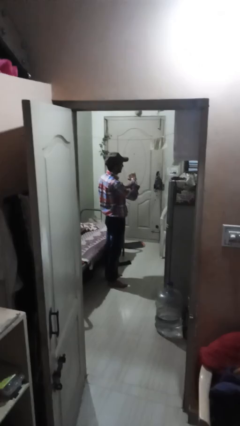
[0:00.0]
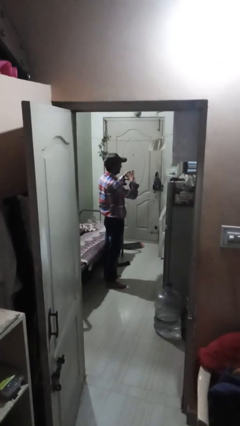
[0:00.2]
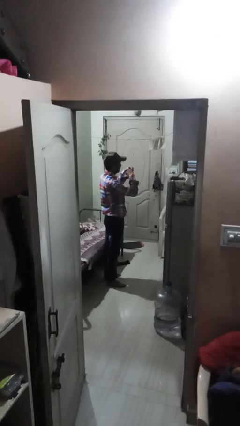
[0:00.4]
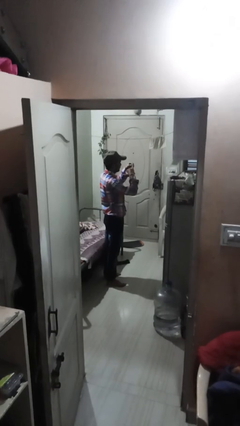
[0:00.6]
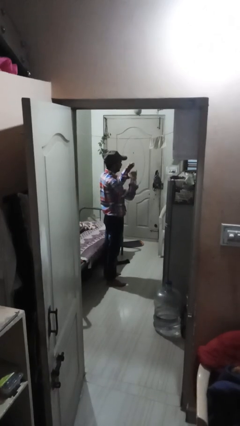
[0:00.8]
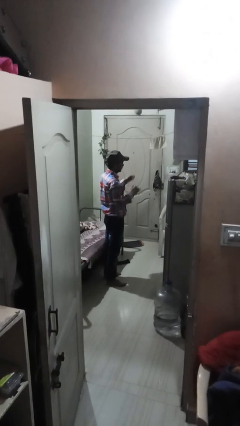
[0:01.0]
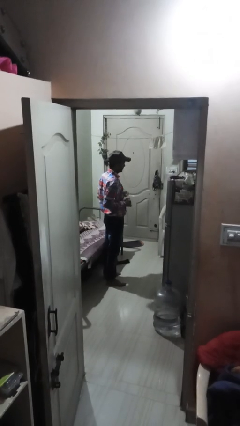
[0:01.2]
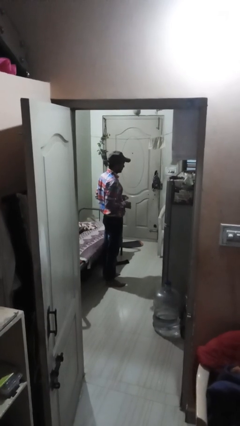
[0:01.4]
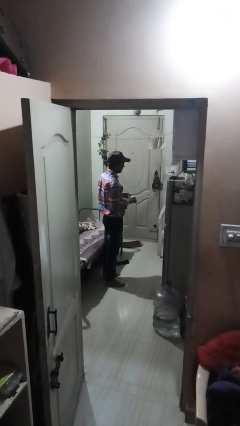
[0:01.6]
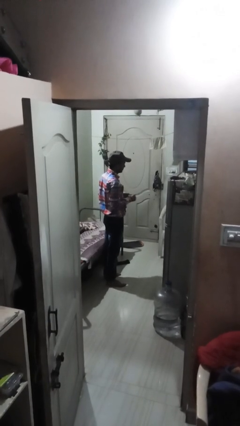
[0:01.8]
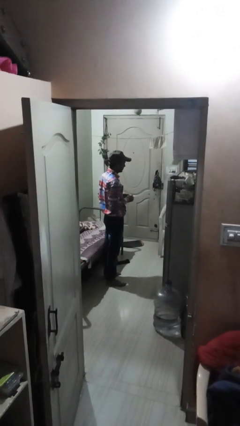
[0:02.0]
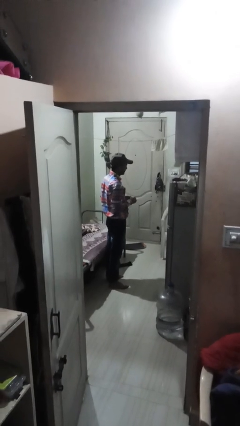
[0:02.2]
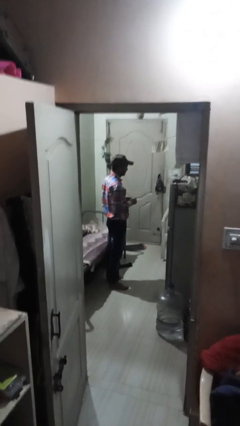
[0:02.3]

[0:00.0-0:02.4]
person takes off ring

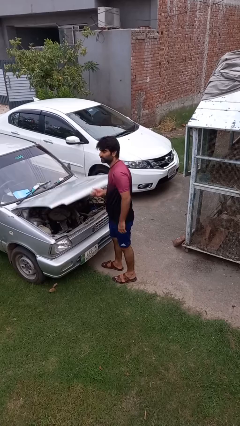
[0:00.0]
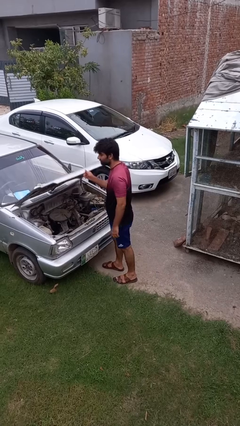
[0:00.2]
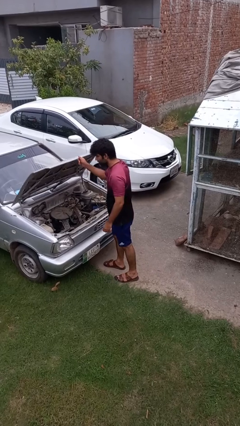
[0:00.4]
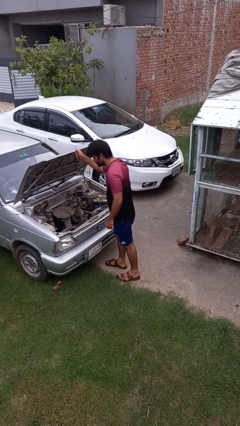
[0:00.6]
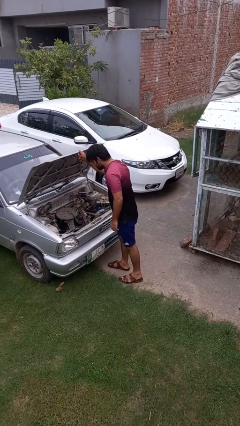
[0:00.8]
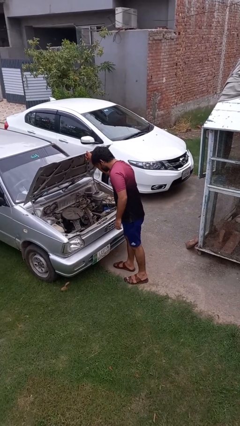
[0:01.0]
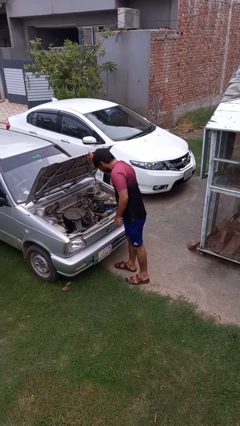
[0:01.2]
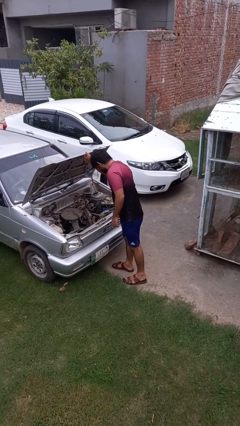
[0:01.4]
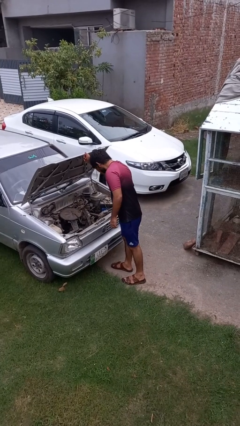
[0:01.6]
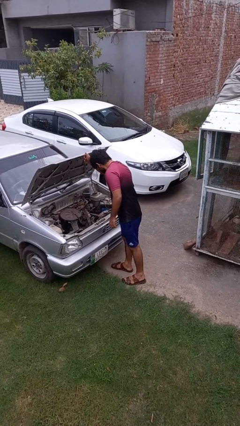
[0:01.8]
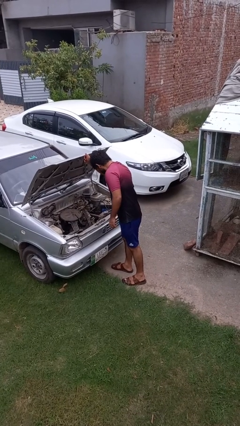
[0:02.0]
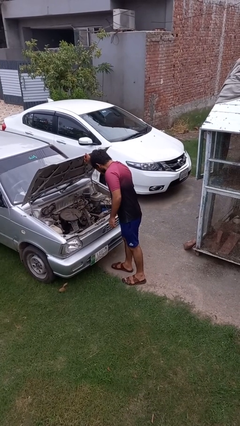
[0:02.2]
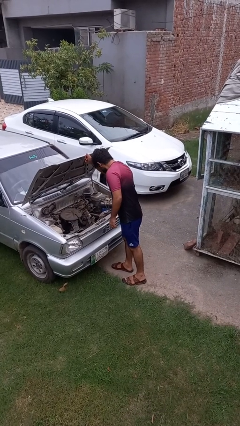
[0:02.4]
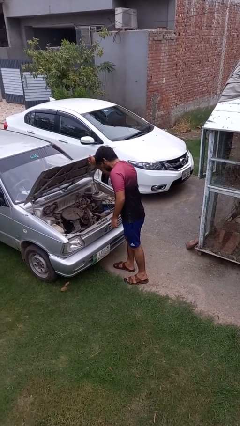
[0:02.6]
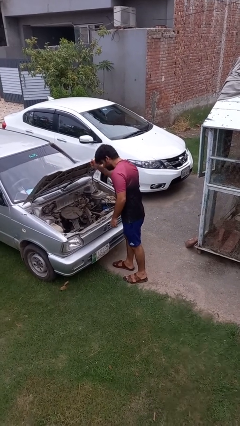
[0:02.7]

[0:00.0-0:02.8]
person opens car hood

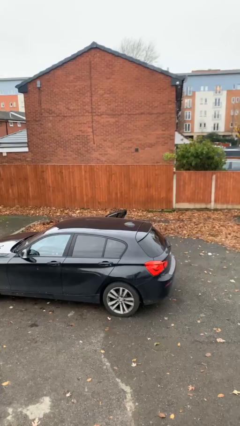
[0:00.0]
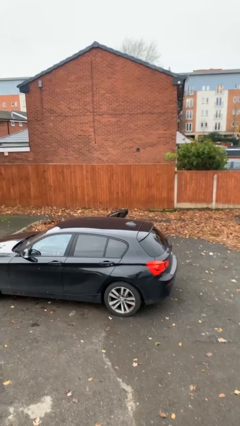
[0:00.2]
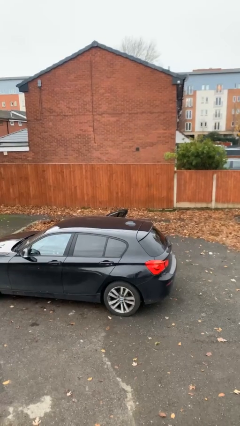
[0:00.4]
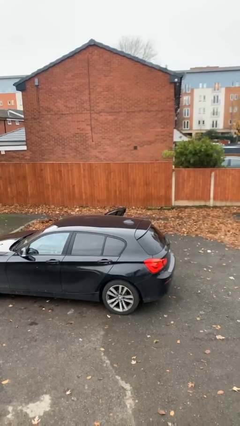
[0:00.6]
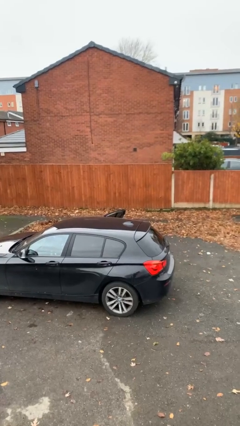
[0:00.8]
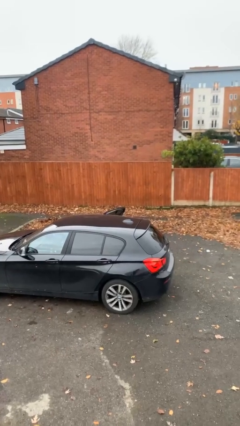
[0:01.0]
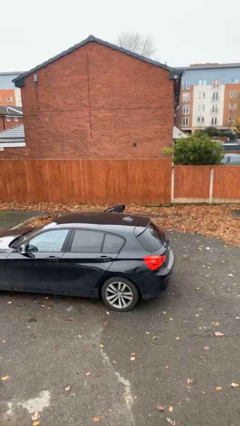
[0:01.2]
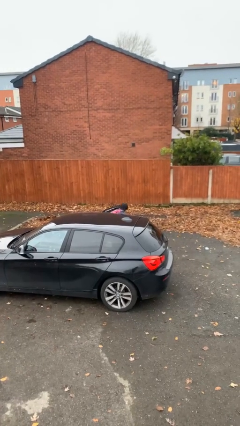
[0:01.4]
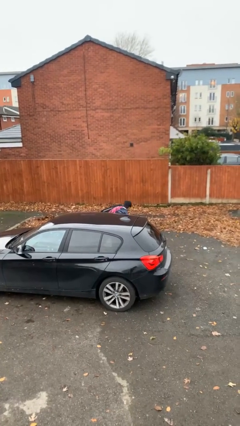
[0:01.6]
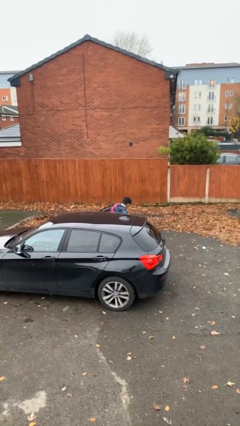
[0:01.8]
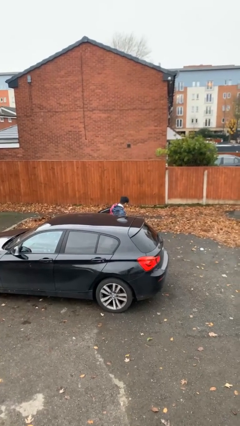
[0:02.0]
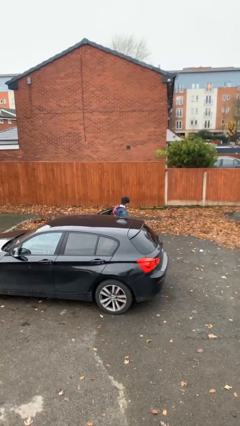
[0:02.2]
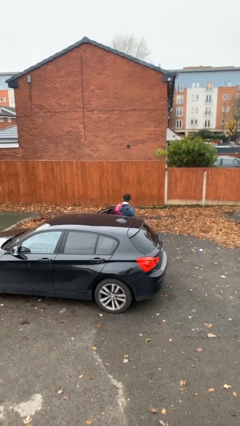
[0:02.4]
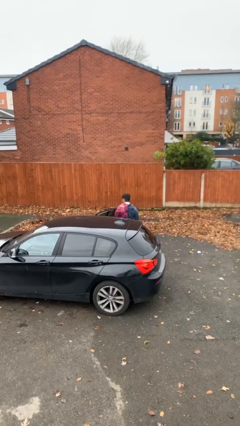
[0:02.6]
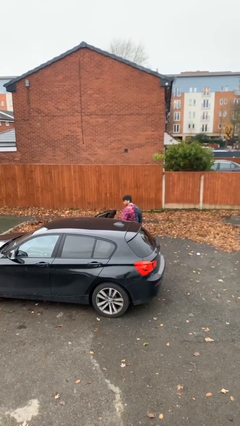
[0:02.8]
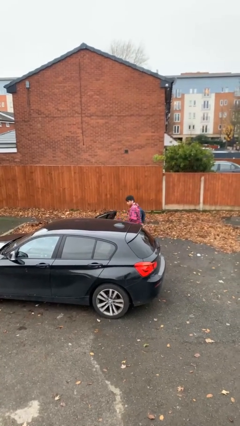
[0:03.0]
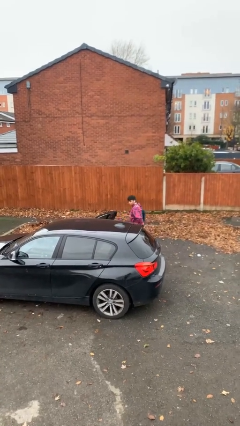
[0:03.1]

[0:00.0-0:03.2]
person exits car

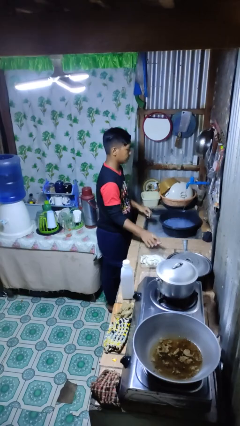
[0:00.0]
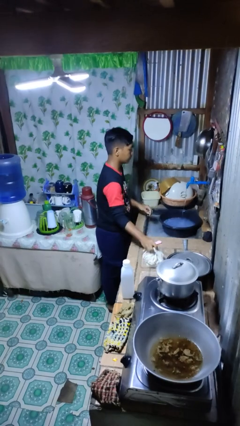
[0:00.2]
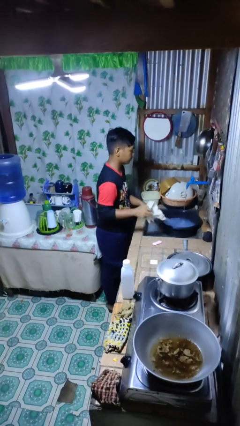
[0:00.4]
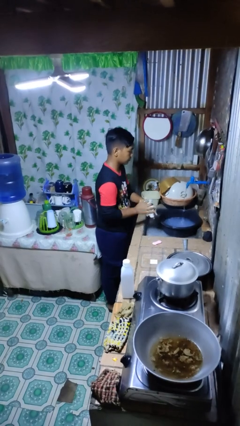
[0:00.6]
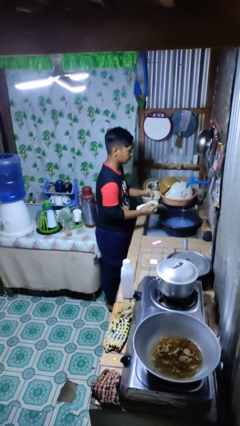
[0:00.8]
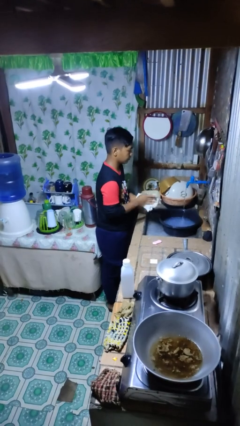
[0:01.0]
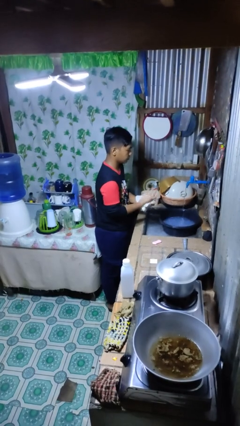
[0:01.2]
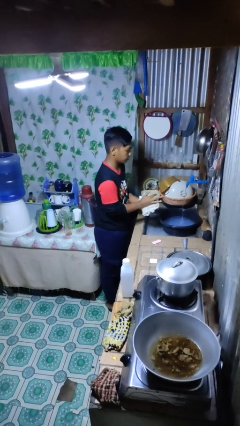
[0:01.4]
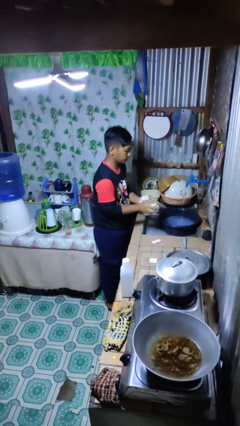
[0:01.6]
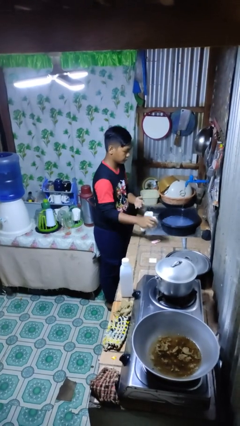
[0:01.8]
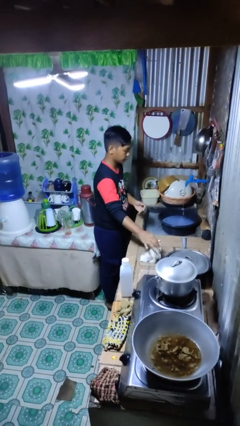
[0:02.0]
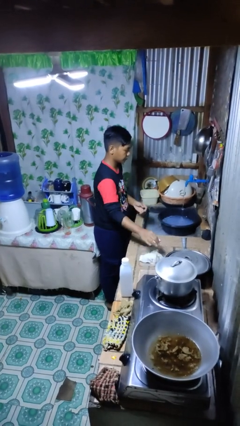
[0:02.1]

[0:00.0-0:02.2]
person dries hands with towel

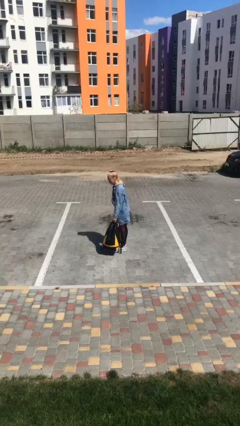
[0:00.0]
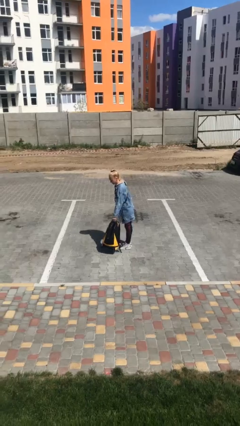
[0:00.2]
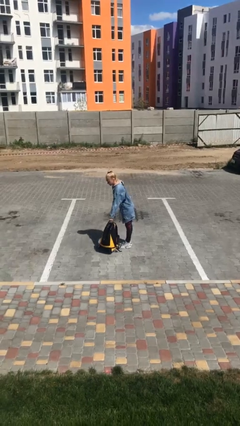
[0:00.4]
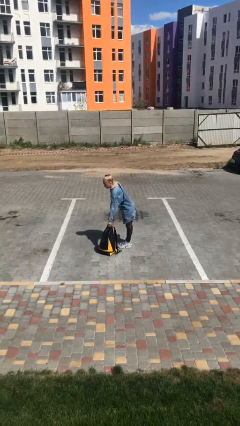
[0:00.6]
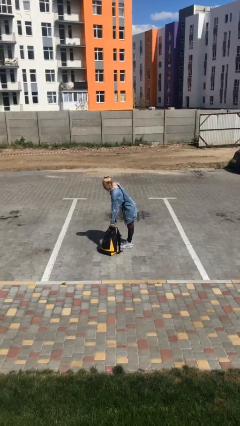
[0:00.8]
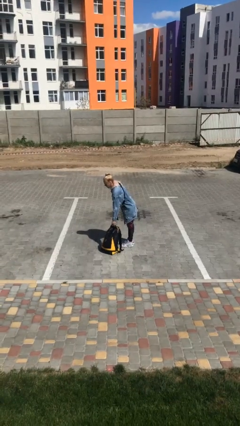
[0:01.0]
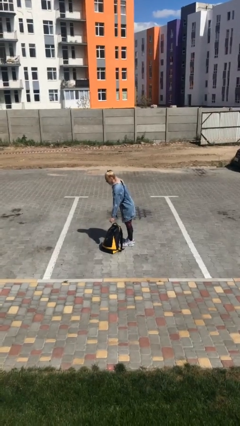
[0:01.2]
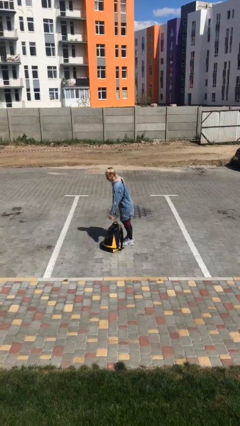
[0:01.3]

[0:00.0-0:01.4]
person puts down object on floor

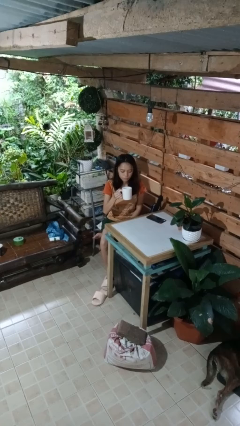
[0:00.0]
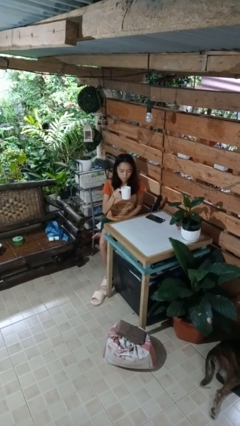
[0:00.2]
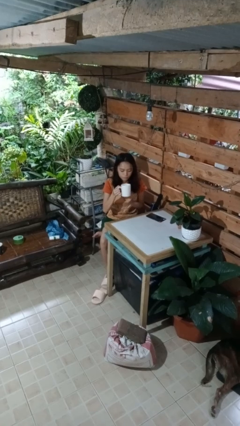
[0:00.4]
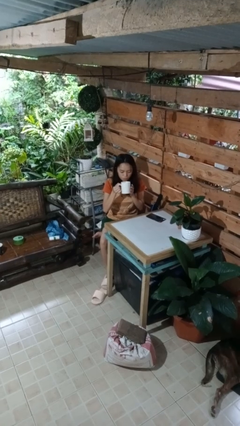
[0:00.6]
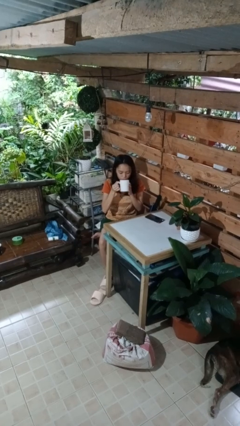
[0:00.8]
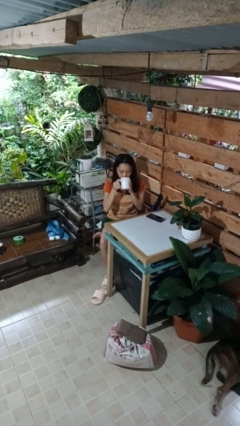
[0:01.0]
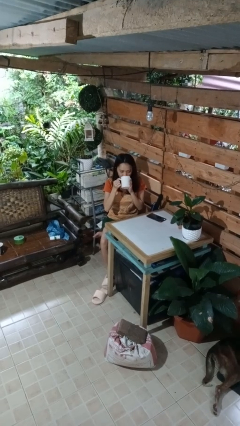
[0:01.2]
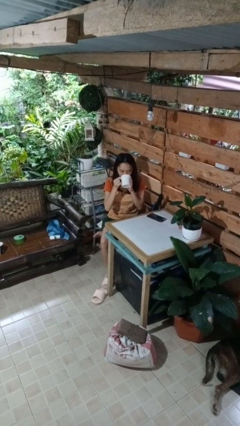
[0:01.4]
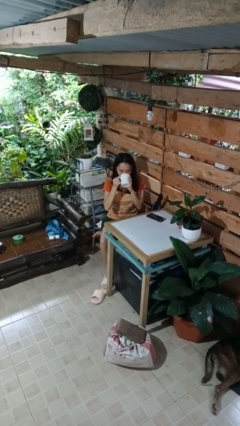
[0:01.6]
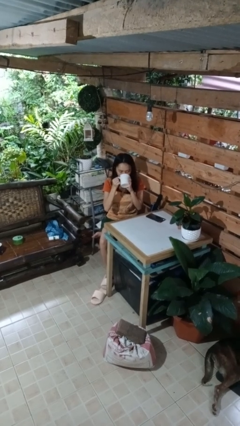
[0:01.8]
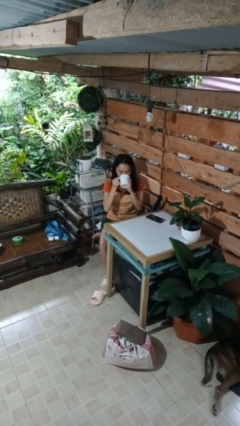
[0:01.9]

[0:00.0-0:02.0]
person drinks from mug

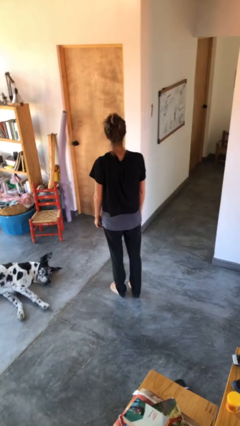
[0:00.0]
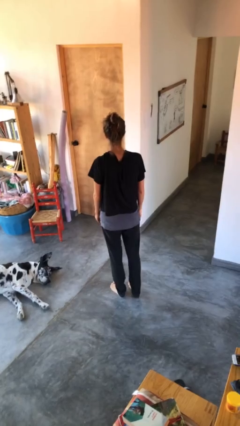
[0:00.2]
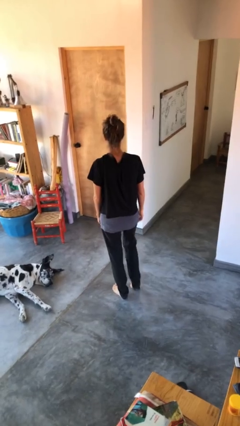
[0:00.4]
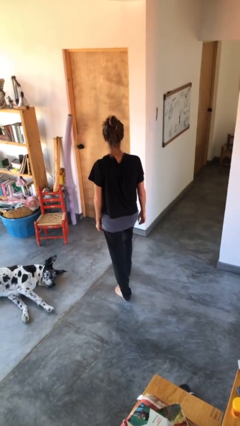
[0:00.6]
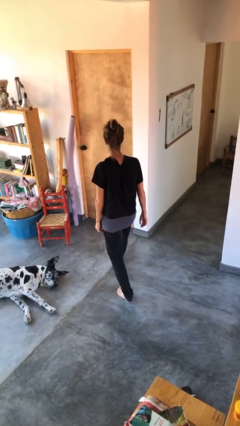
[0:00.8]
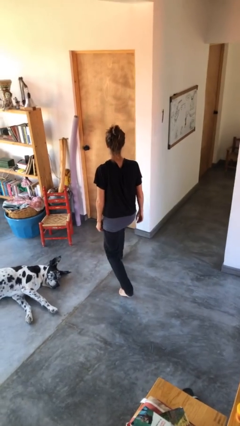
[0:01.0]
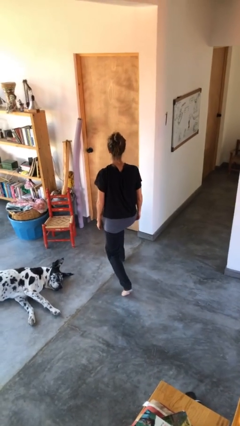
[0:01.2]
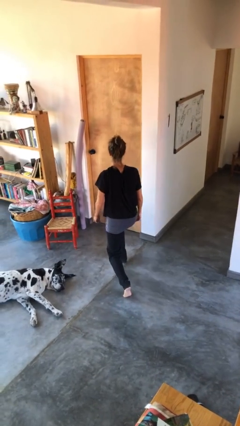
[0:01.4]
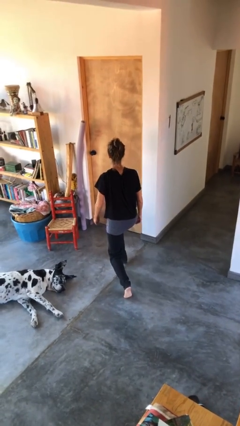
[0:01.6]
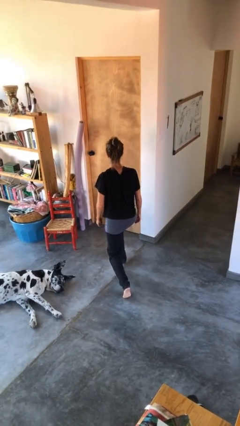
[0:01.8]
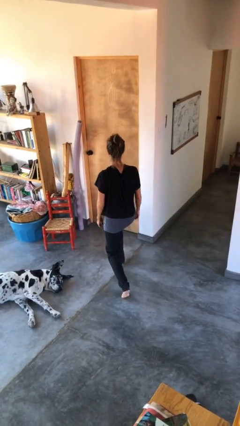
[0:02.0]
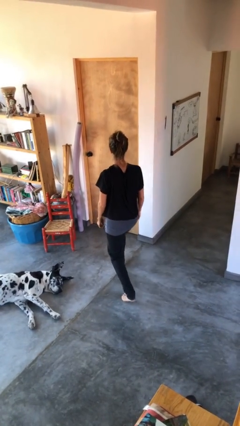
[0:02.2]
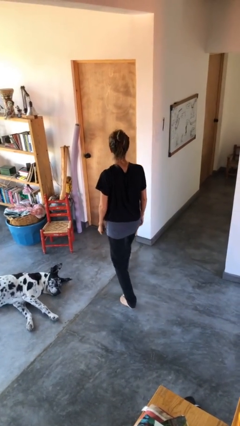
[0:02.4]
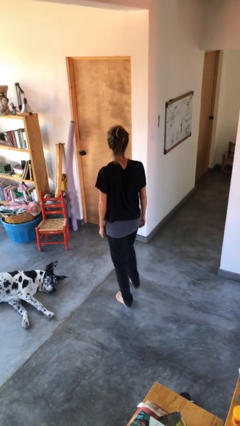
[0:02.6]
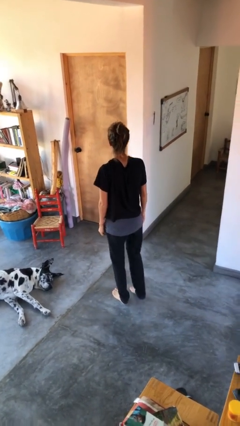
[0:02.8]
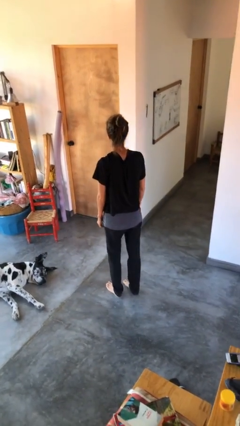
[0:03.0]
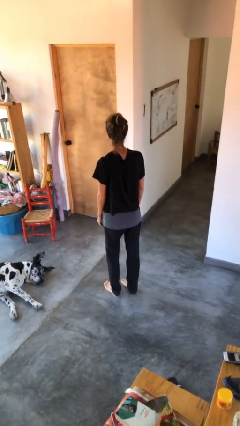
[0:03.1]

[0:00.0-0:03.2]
person exercises with lunges
